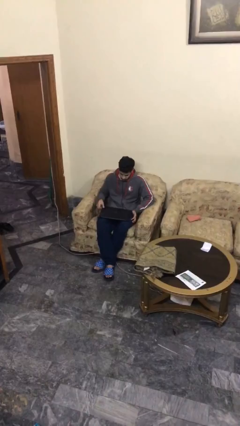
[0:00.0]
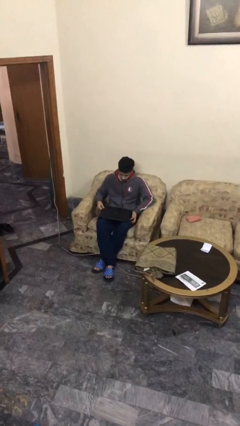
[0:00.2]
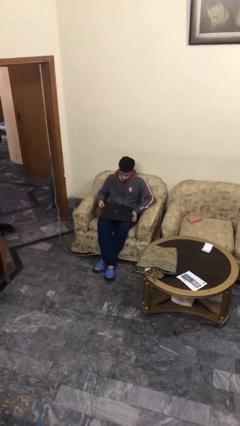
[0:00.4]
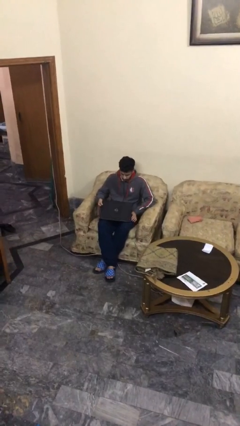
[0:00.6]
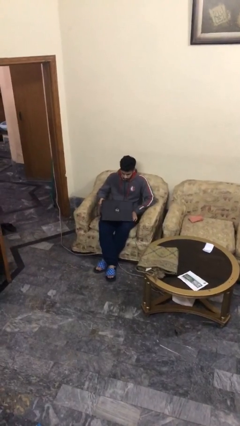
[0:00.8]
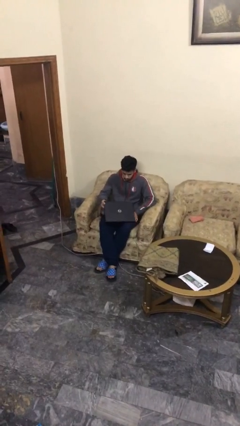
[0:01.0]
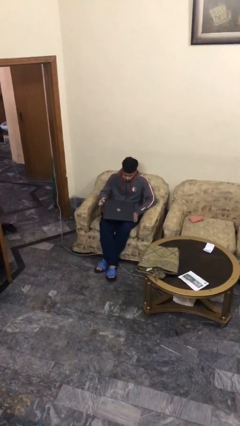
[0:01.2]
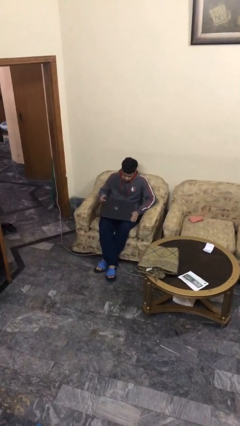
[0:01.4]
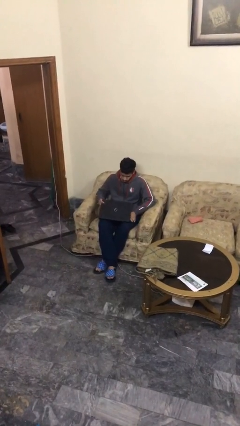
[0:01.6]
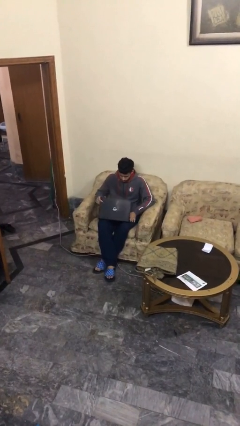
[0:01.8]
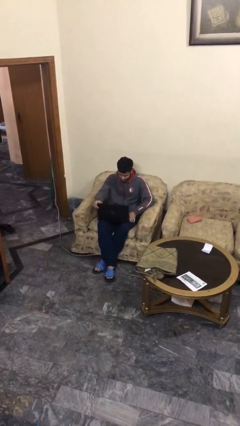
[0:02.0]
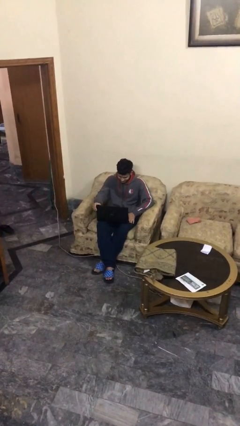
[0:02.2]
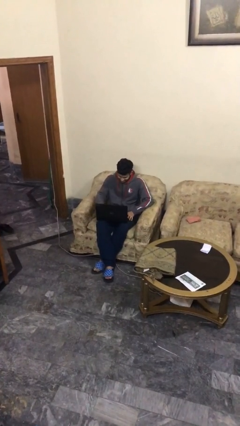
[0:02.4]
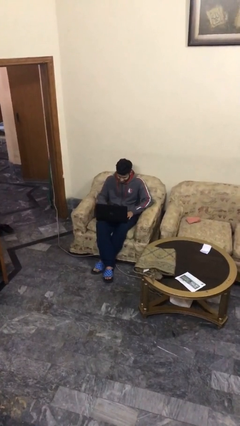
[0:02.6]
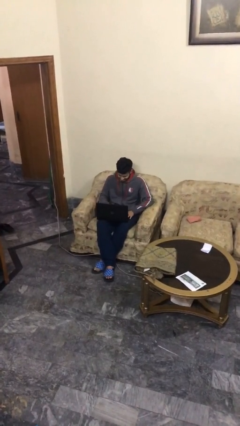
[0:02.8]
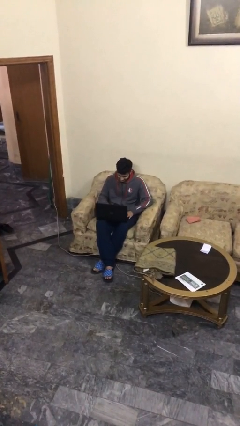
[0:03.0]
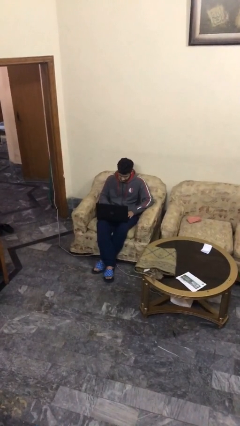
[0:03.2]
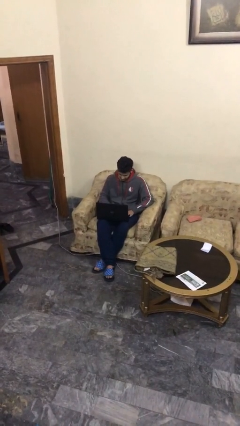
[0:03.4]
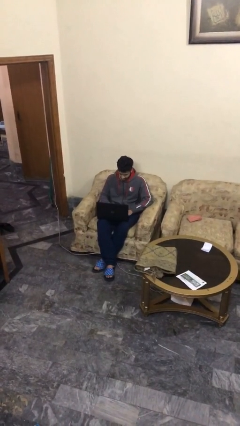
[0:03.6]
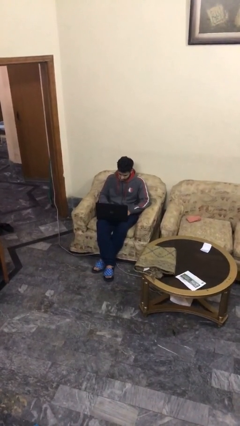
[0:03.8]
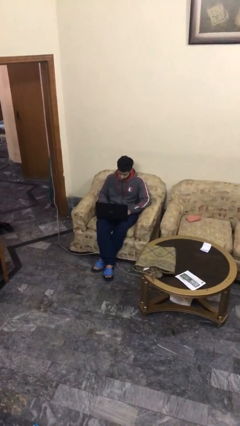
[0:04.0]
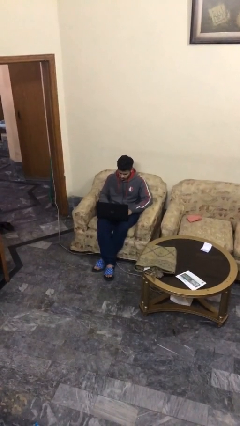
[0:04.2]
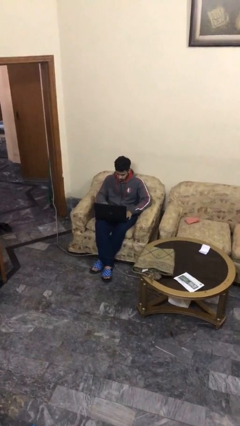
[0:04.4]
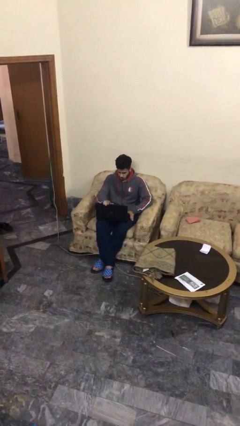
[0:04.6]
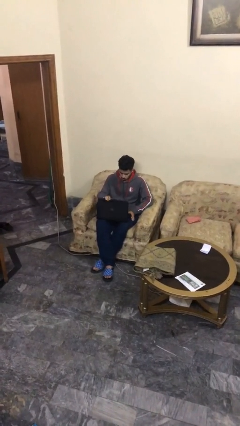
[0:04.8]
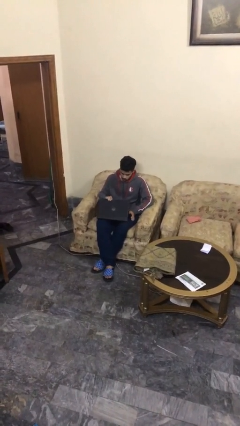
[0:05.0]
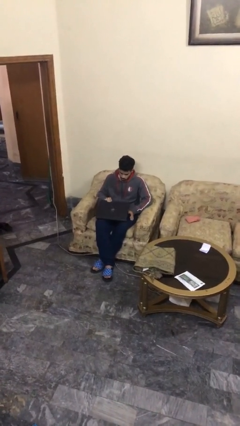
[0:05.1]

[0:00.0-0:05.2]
person interacts with laptop

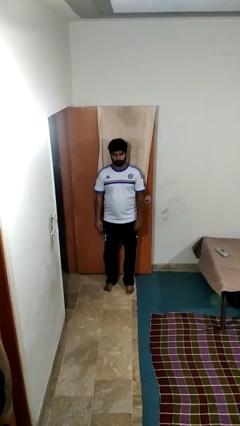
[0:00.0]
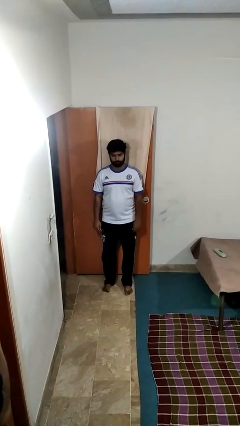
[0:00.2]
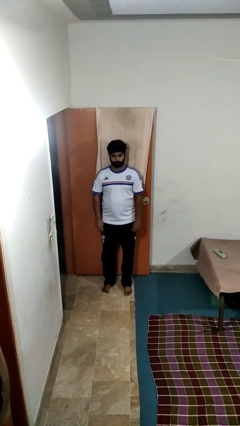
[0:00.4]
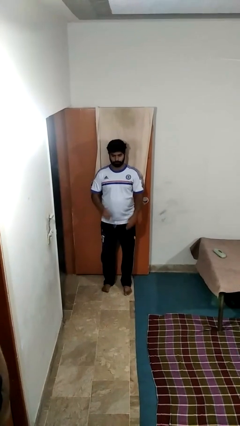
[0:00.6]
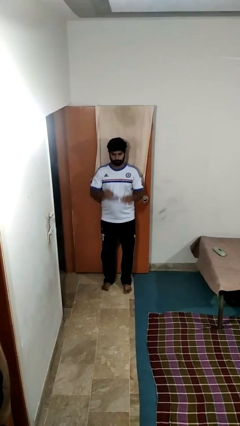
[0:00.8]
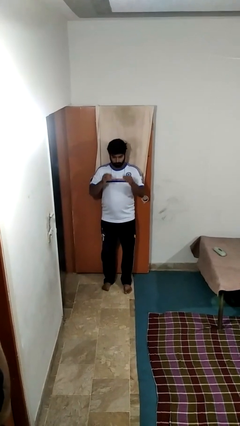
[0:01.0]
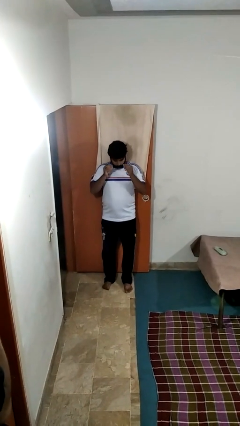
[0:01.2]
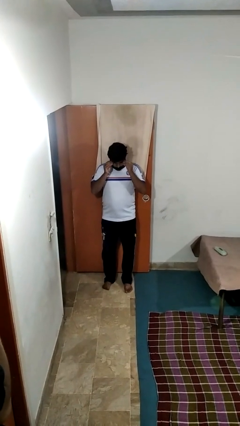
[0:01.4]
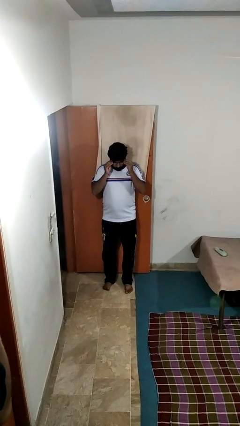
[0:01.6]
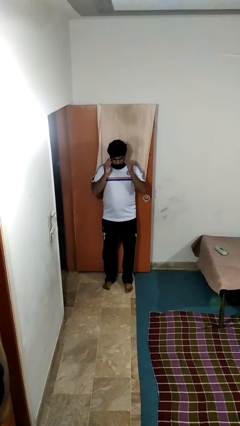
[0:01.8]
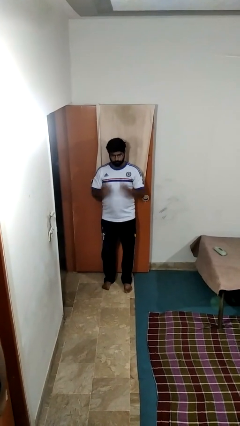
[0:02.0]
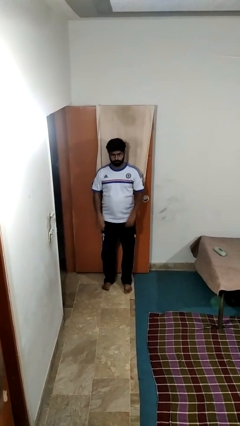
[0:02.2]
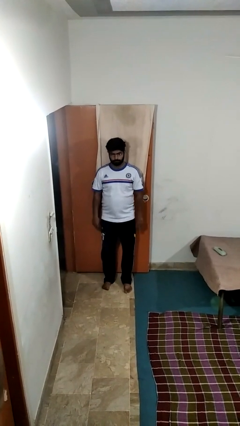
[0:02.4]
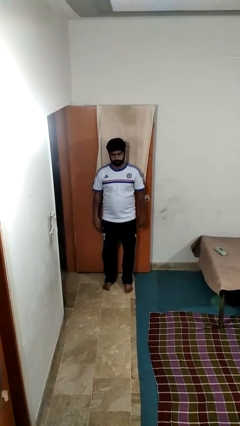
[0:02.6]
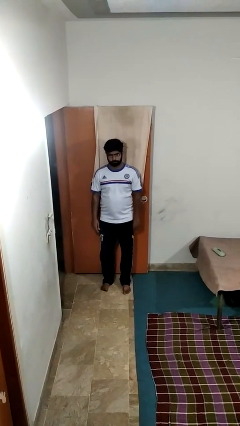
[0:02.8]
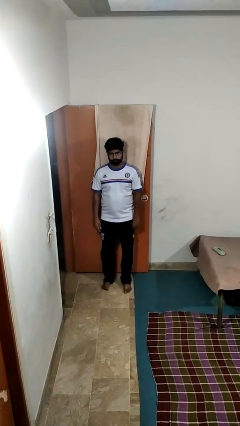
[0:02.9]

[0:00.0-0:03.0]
person puts on glasses

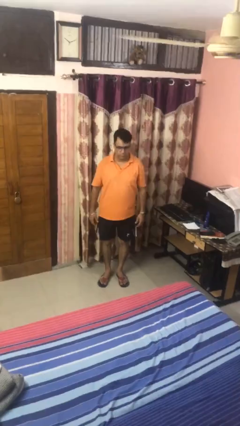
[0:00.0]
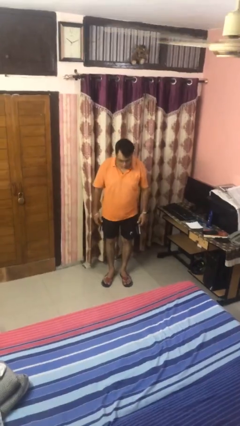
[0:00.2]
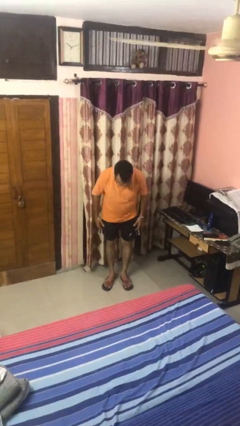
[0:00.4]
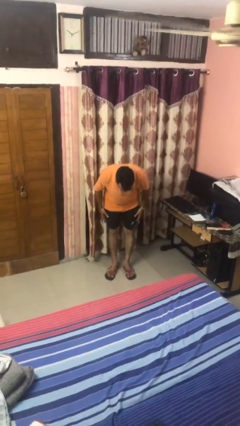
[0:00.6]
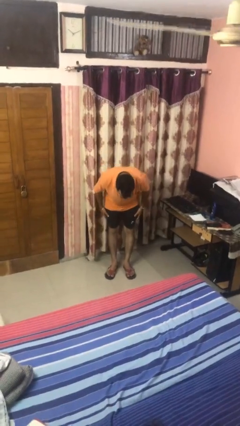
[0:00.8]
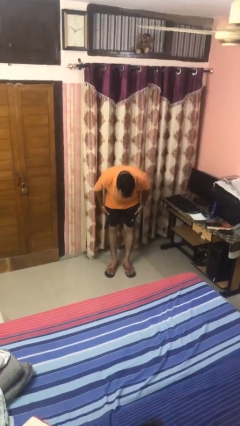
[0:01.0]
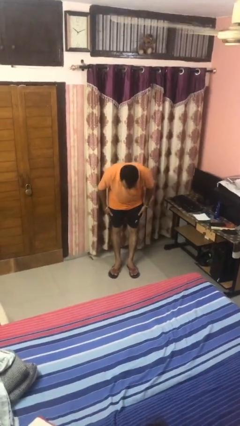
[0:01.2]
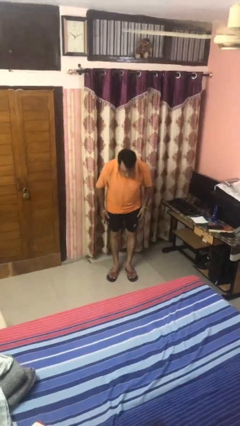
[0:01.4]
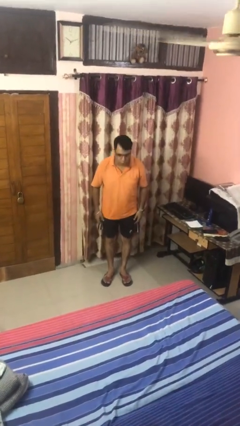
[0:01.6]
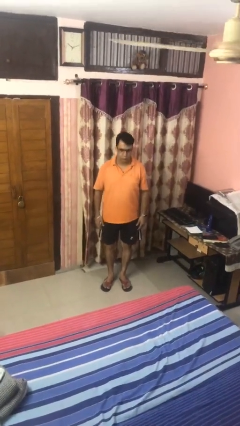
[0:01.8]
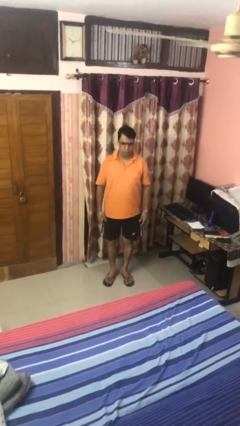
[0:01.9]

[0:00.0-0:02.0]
person bows

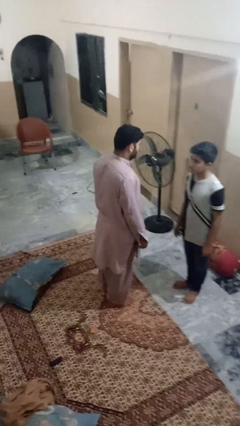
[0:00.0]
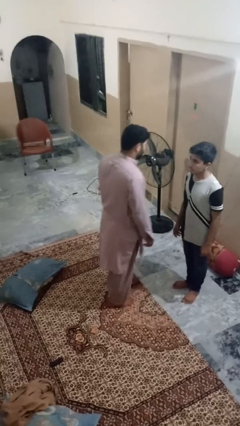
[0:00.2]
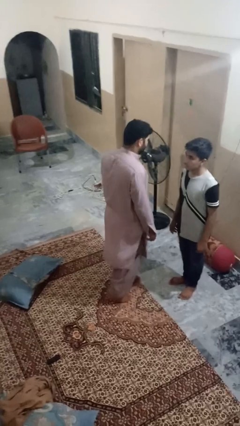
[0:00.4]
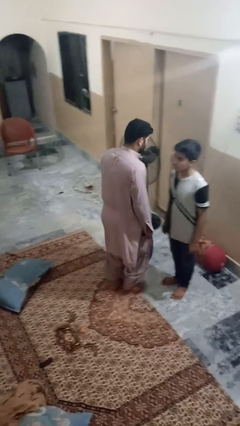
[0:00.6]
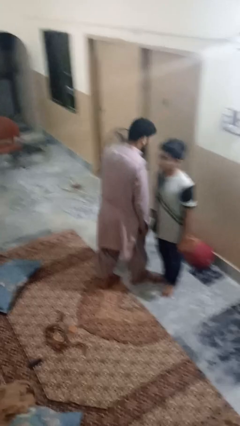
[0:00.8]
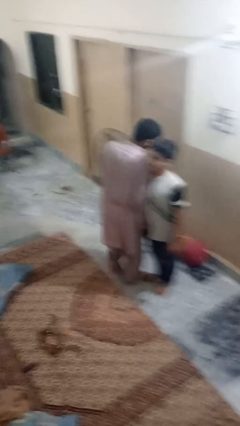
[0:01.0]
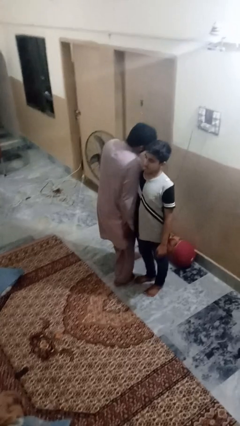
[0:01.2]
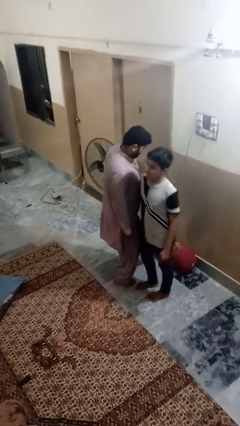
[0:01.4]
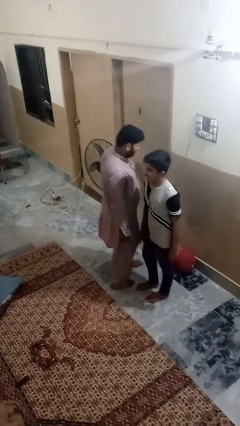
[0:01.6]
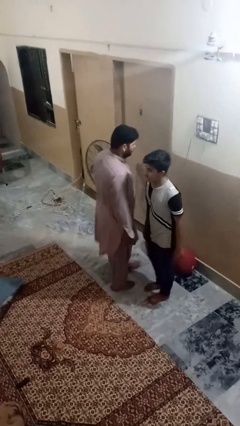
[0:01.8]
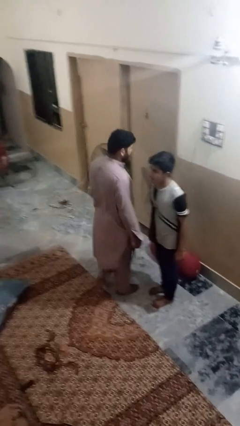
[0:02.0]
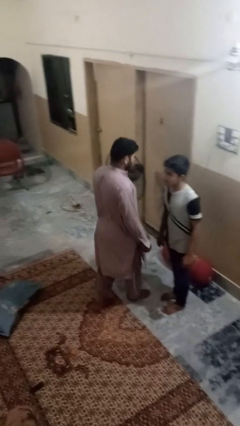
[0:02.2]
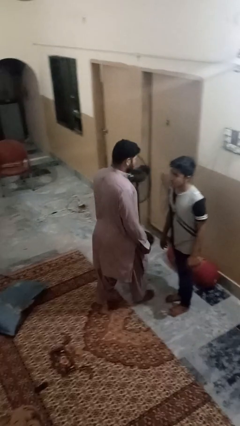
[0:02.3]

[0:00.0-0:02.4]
person bumps into person

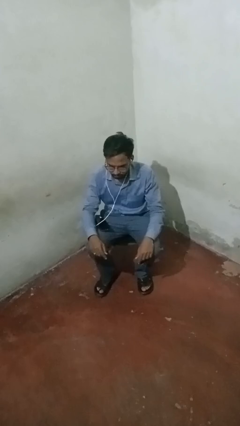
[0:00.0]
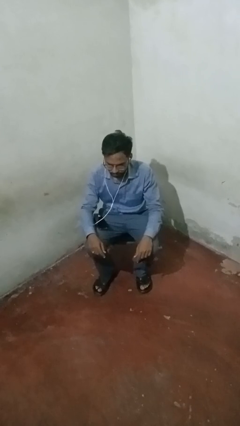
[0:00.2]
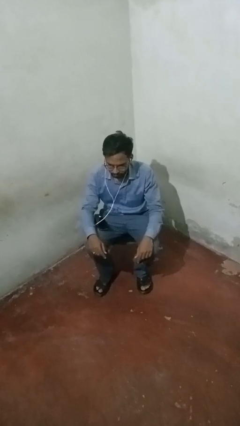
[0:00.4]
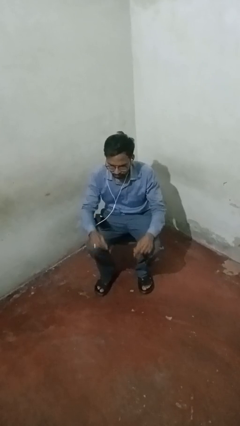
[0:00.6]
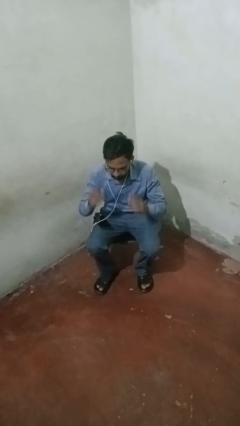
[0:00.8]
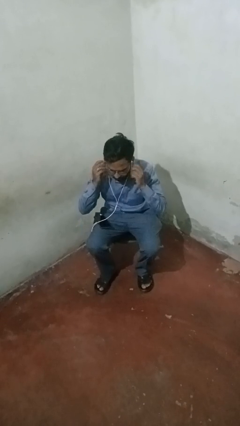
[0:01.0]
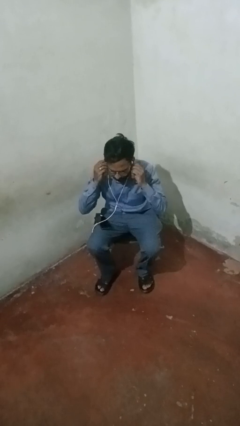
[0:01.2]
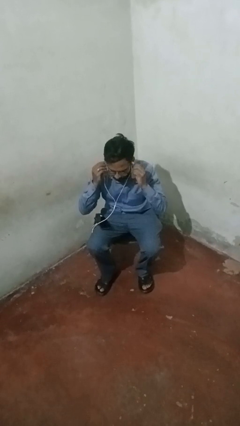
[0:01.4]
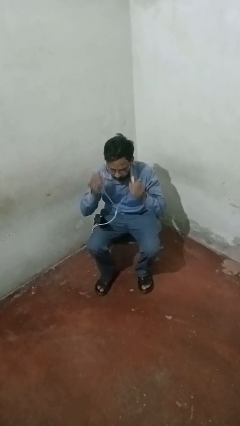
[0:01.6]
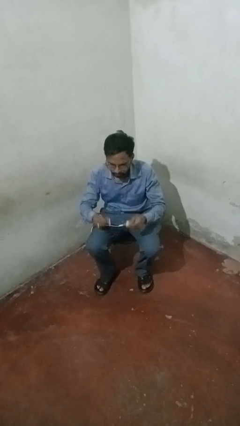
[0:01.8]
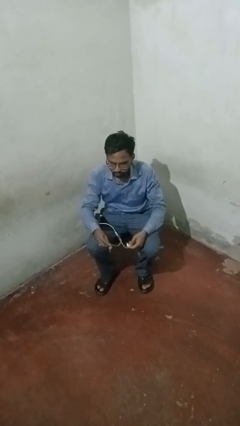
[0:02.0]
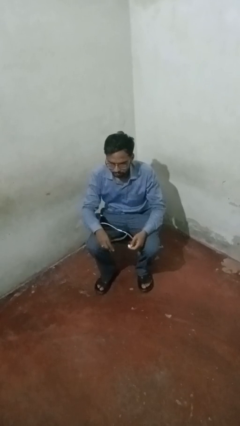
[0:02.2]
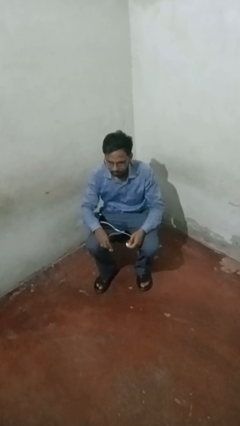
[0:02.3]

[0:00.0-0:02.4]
person takes off headphones

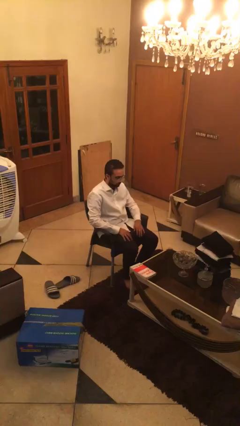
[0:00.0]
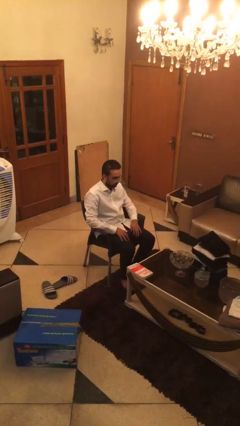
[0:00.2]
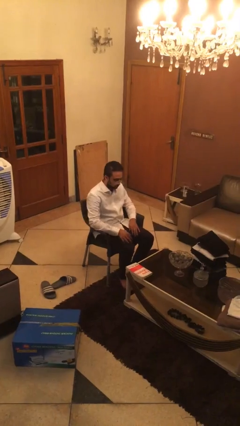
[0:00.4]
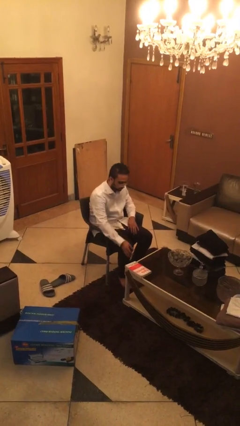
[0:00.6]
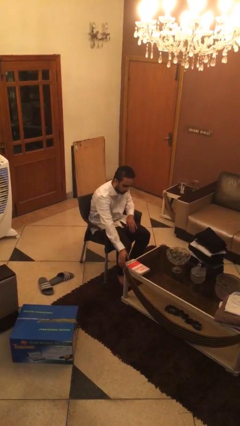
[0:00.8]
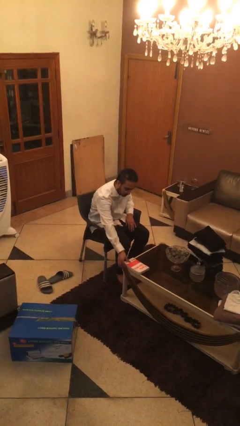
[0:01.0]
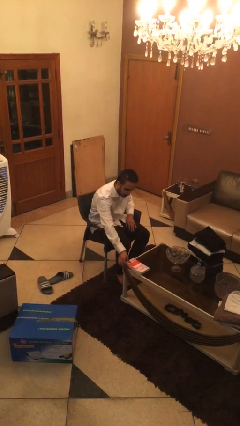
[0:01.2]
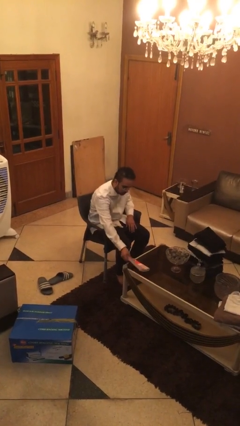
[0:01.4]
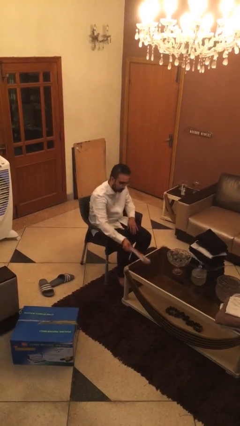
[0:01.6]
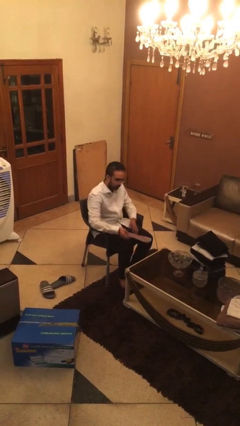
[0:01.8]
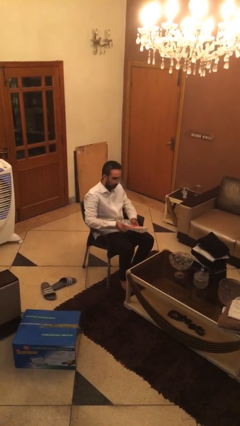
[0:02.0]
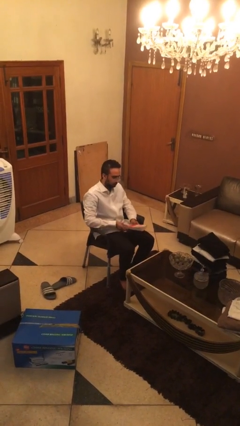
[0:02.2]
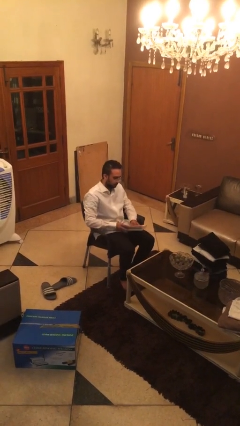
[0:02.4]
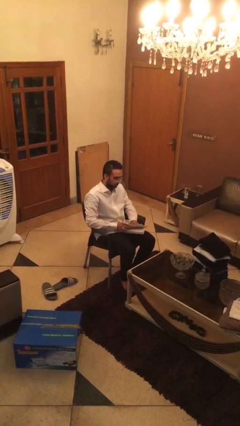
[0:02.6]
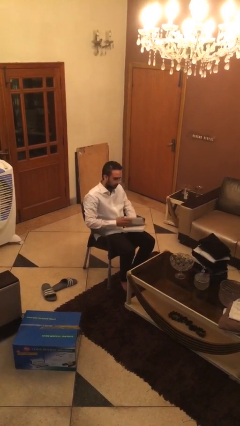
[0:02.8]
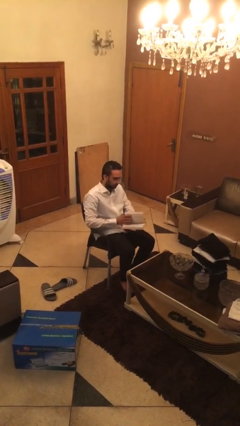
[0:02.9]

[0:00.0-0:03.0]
person picks up object from table
